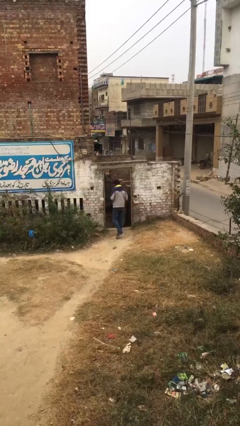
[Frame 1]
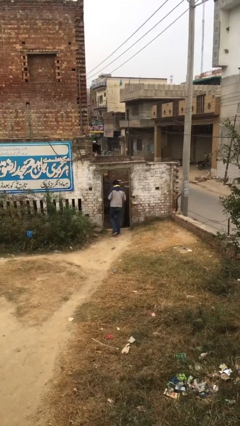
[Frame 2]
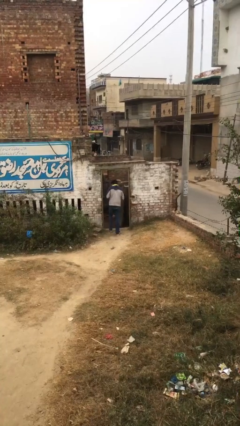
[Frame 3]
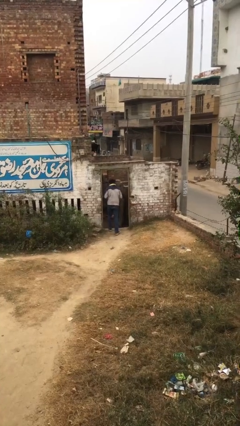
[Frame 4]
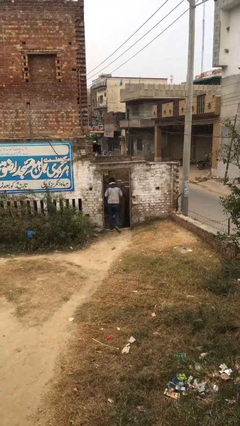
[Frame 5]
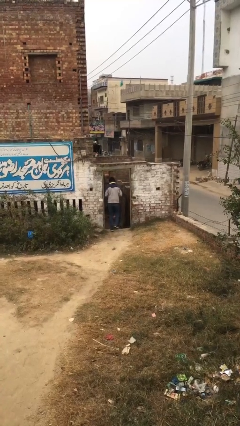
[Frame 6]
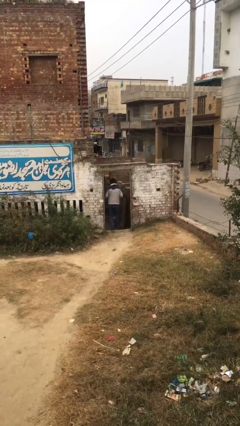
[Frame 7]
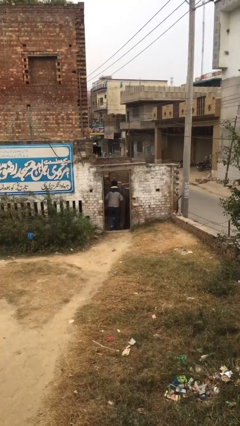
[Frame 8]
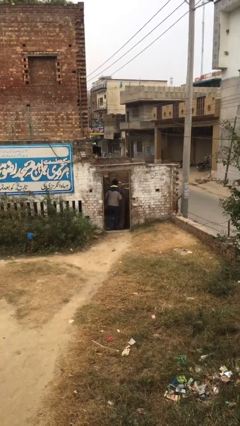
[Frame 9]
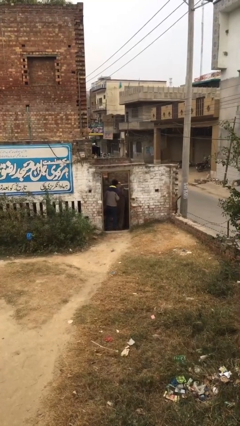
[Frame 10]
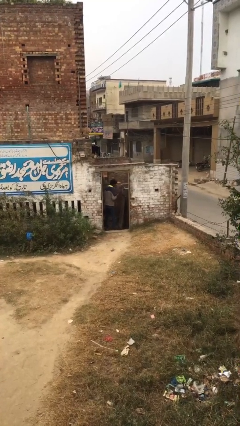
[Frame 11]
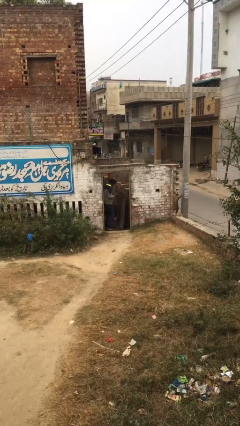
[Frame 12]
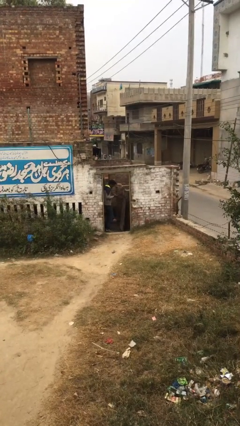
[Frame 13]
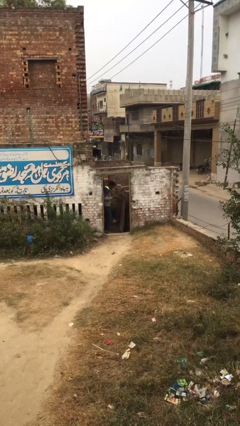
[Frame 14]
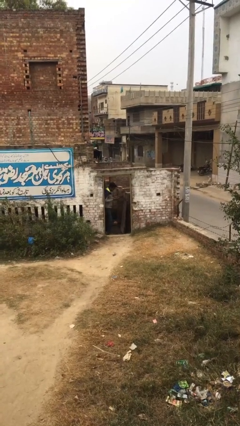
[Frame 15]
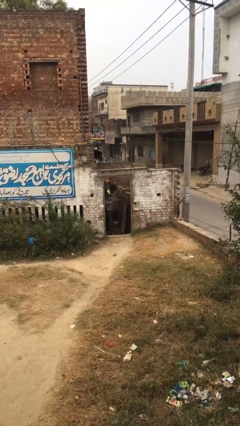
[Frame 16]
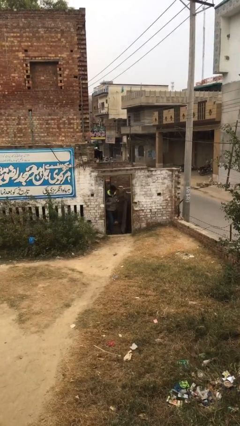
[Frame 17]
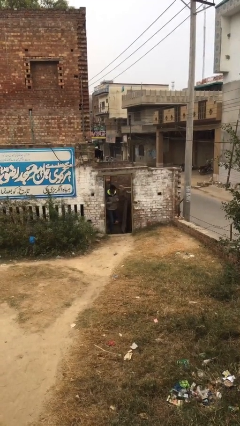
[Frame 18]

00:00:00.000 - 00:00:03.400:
person enters scene through structure

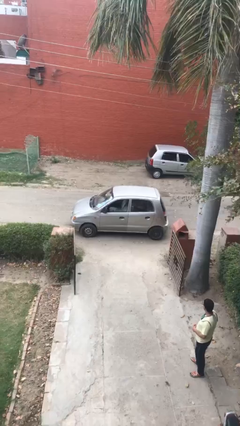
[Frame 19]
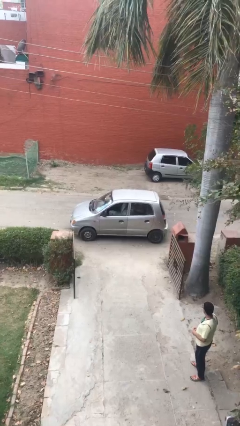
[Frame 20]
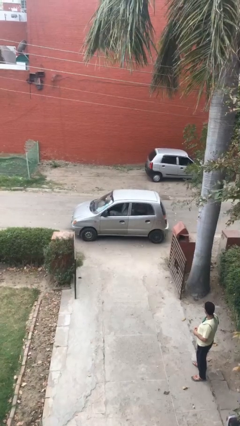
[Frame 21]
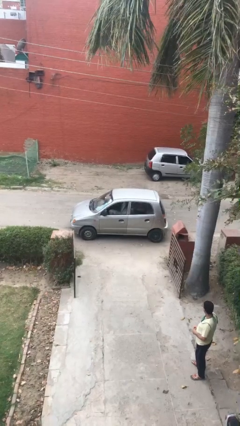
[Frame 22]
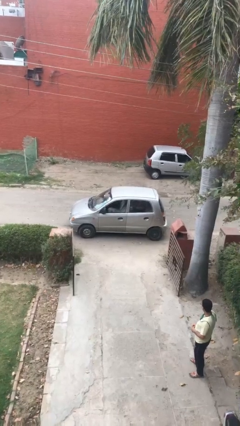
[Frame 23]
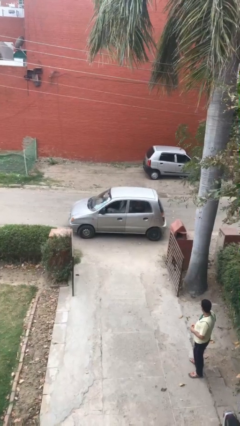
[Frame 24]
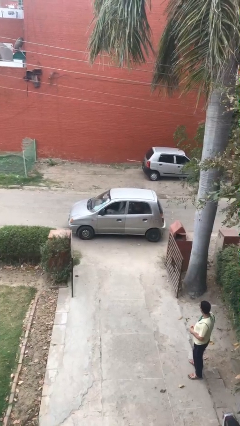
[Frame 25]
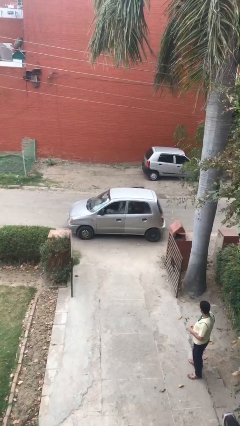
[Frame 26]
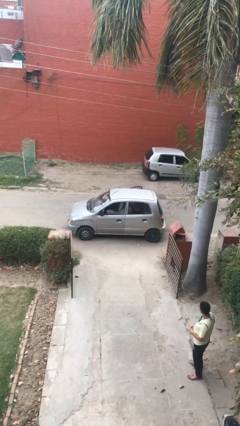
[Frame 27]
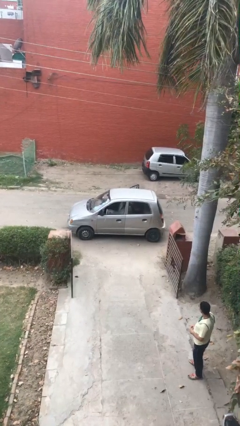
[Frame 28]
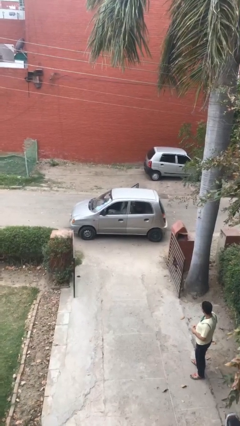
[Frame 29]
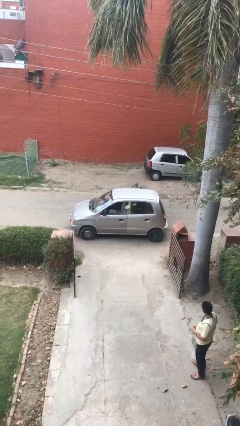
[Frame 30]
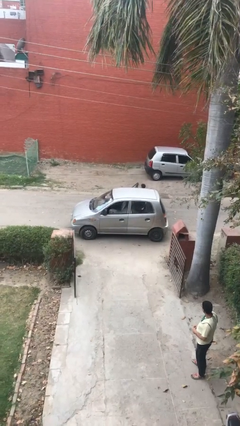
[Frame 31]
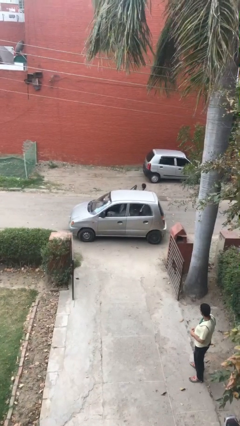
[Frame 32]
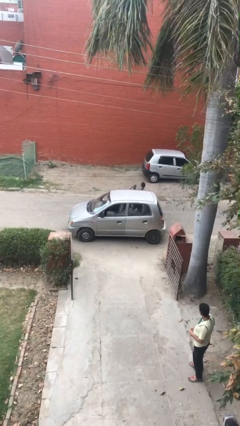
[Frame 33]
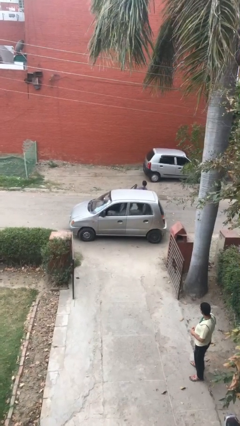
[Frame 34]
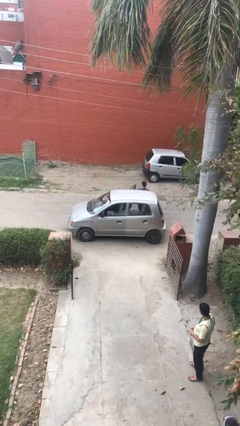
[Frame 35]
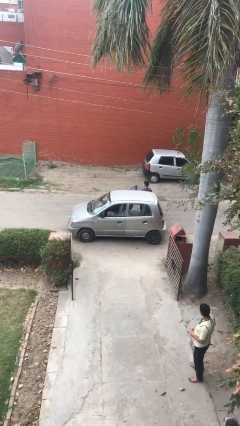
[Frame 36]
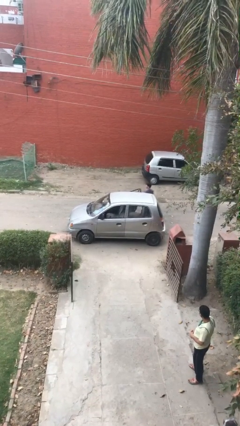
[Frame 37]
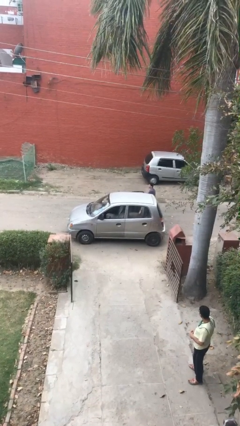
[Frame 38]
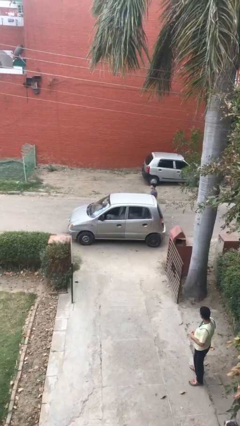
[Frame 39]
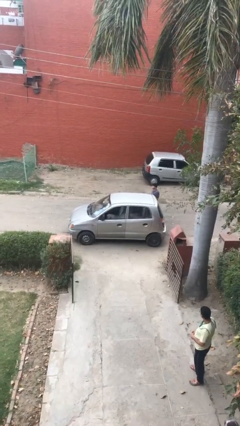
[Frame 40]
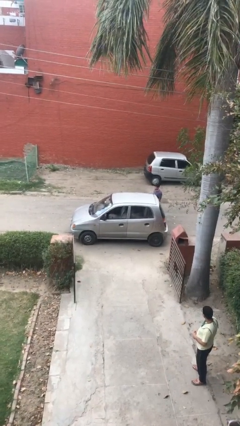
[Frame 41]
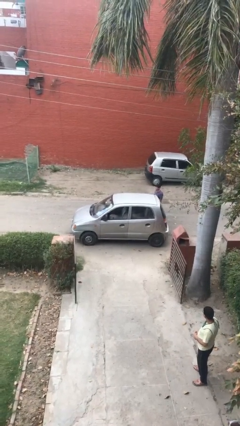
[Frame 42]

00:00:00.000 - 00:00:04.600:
car drops off person

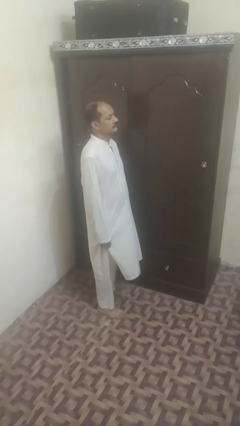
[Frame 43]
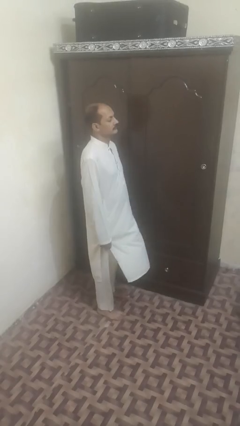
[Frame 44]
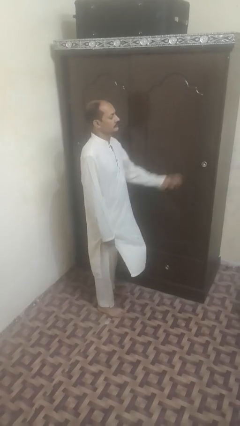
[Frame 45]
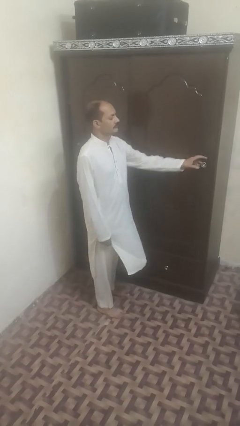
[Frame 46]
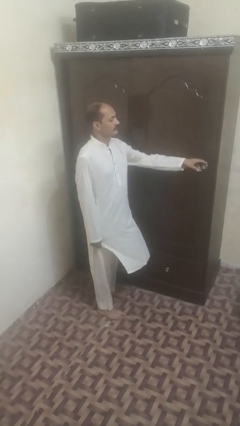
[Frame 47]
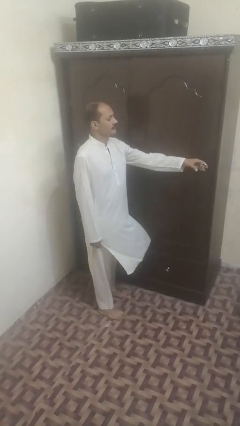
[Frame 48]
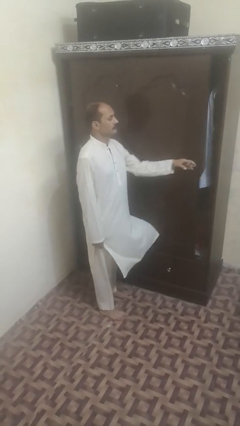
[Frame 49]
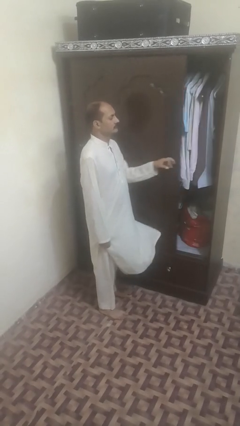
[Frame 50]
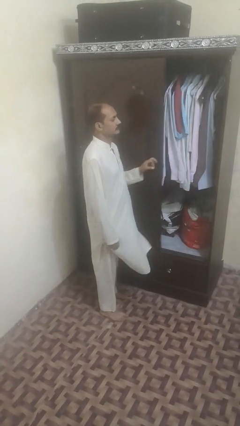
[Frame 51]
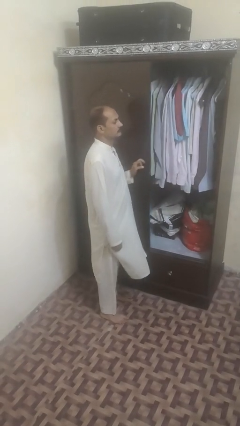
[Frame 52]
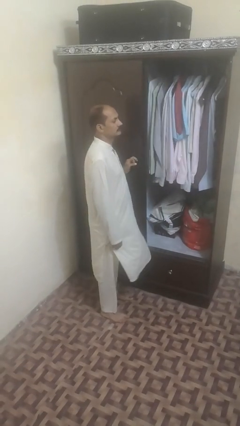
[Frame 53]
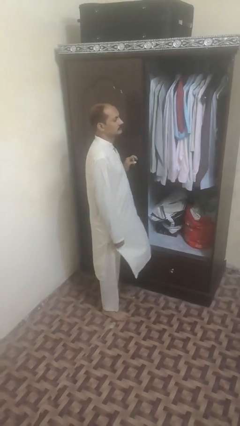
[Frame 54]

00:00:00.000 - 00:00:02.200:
person opens sliding door

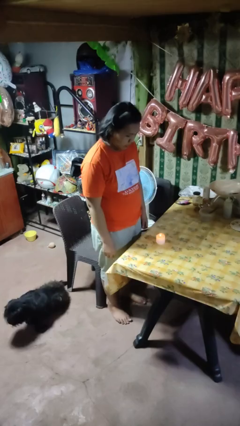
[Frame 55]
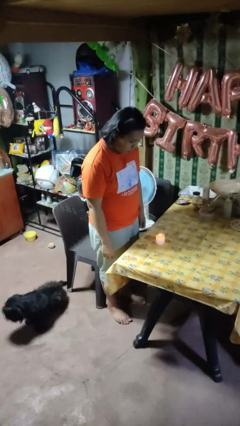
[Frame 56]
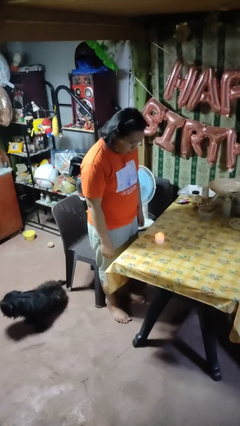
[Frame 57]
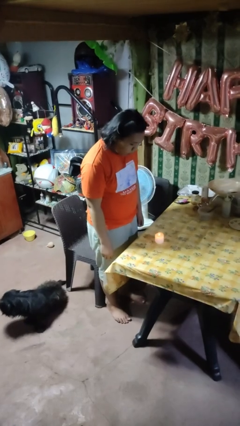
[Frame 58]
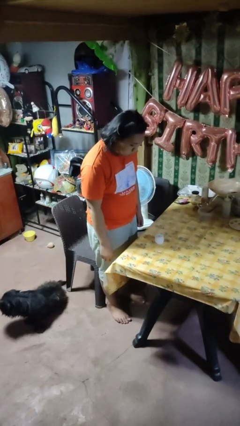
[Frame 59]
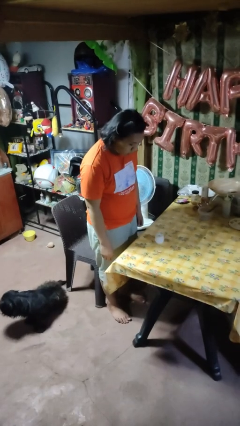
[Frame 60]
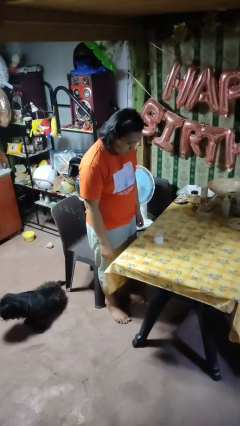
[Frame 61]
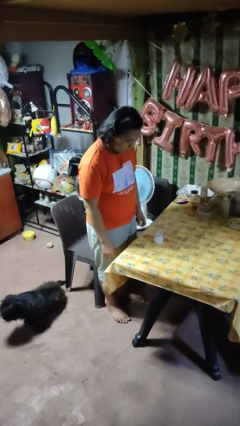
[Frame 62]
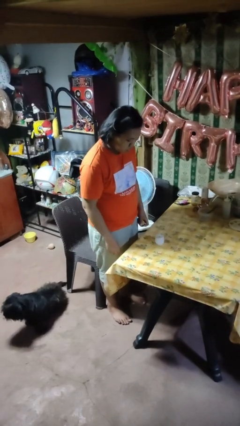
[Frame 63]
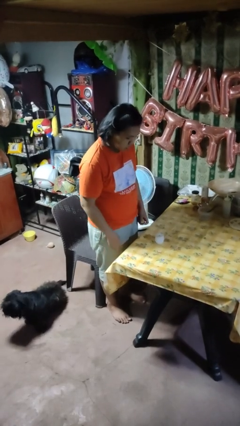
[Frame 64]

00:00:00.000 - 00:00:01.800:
person extinguishes candle

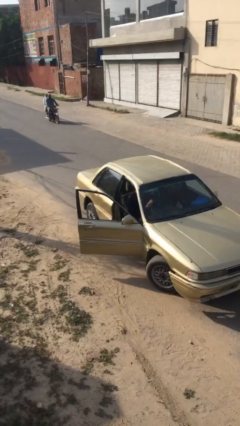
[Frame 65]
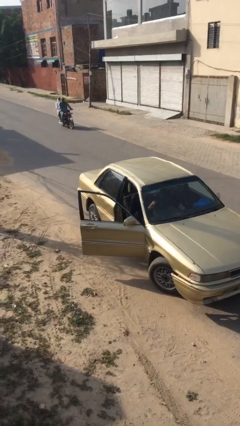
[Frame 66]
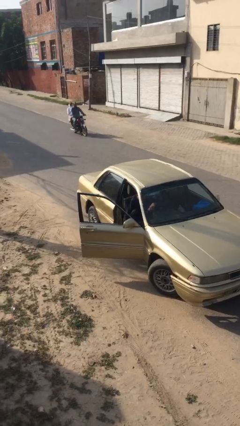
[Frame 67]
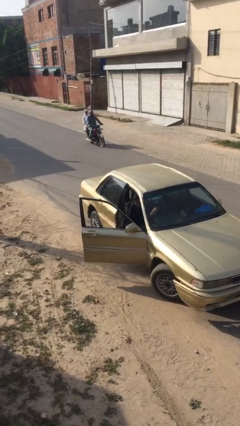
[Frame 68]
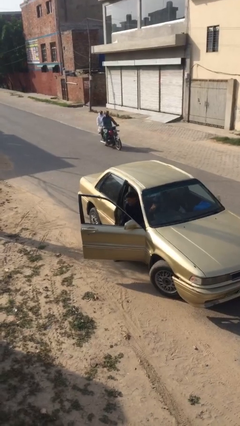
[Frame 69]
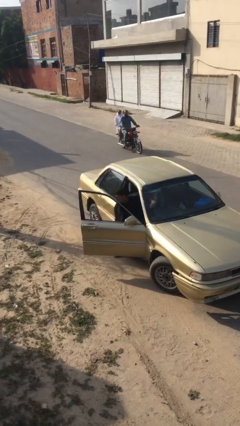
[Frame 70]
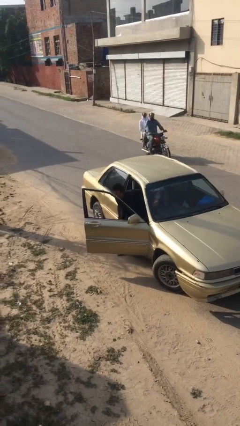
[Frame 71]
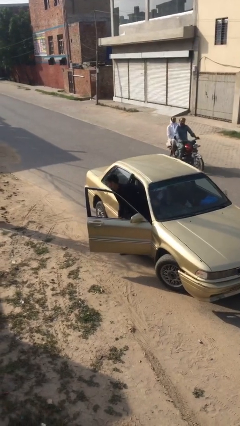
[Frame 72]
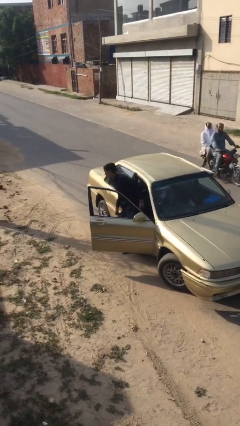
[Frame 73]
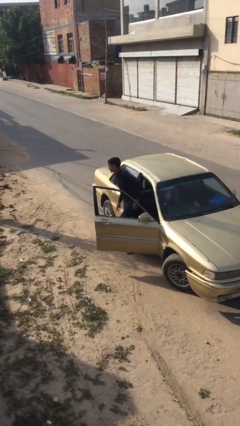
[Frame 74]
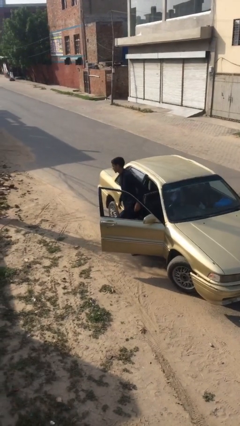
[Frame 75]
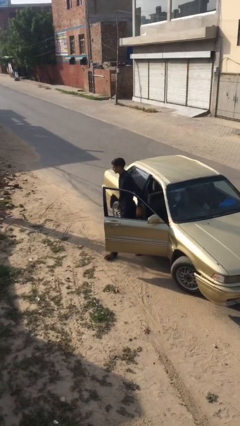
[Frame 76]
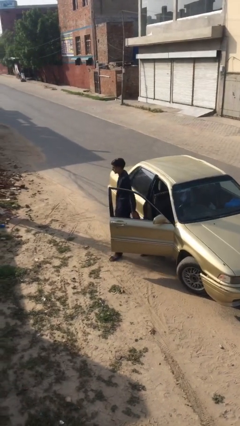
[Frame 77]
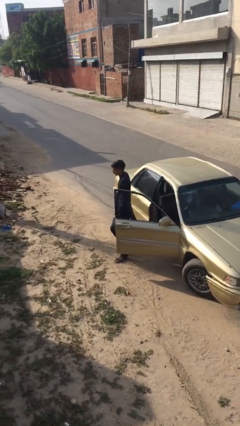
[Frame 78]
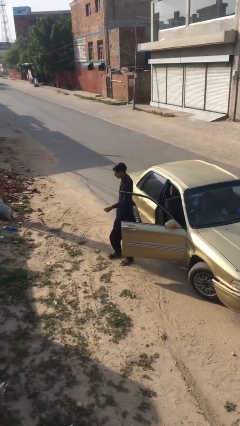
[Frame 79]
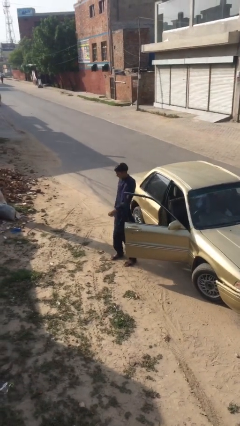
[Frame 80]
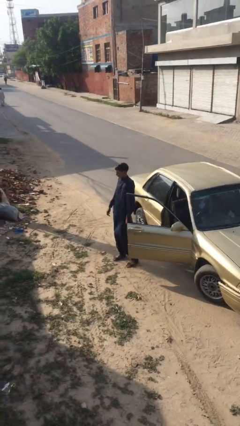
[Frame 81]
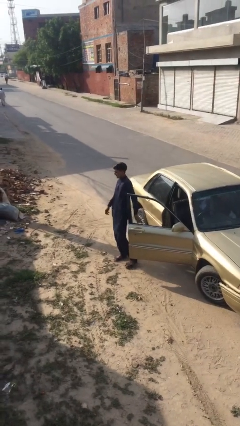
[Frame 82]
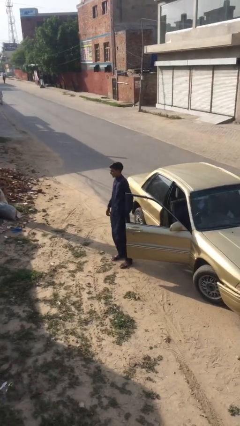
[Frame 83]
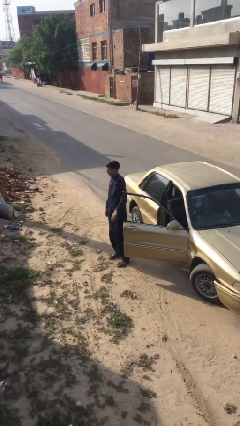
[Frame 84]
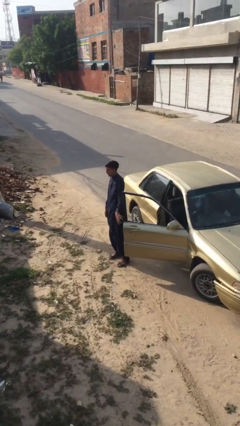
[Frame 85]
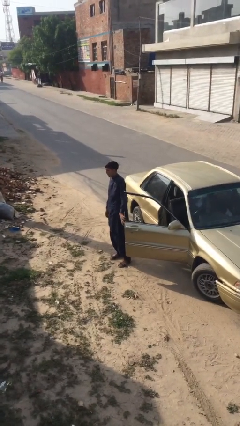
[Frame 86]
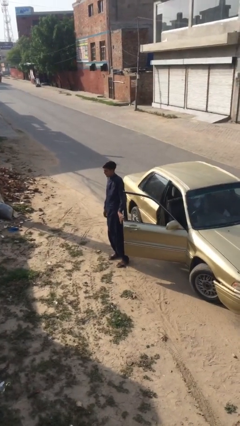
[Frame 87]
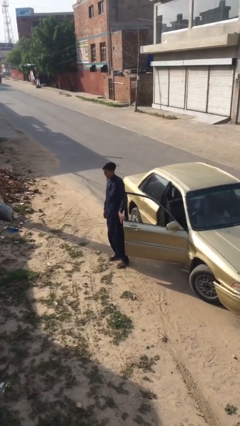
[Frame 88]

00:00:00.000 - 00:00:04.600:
person exits car

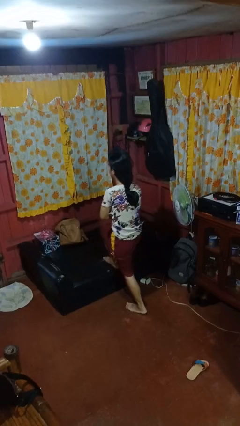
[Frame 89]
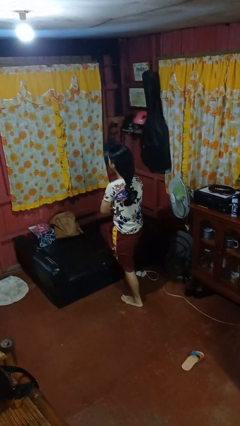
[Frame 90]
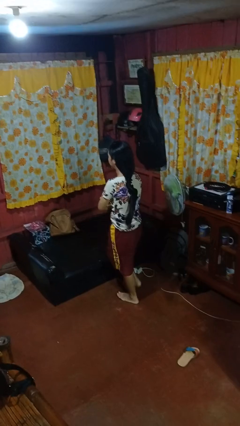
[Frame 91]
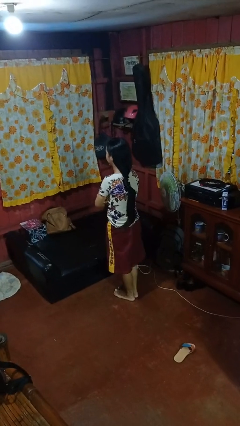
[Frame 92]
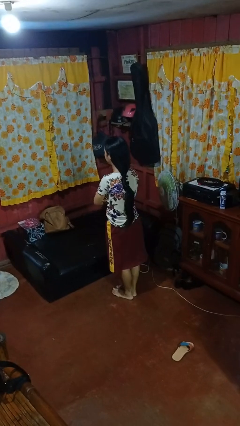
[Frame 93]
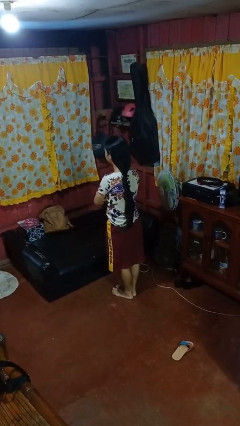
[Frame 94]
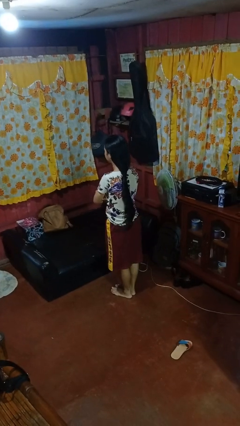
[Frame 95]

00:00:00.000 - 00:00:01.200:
person climbs off couch
